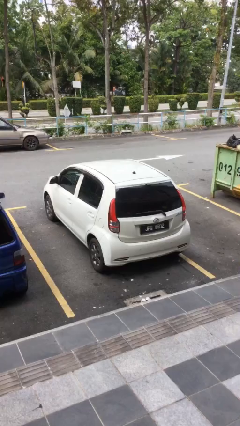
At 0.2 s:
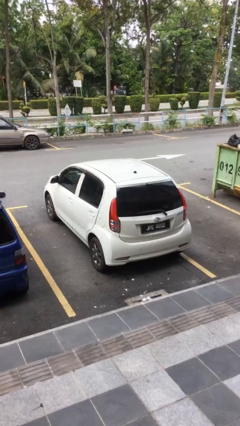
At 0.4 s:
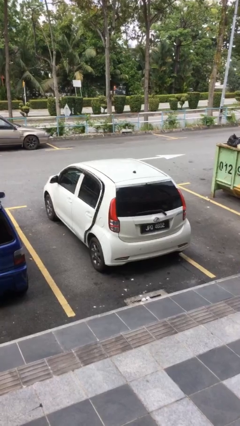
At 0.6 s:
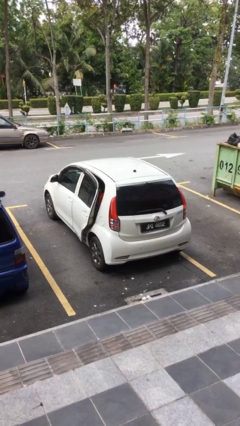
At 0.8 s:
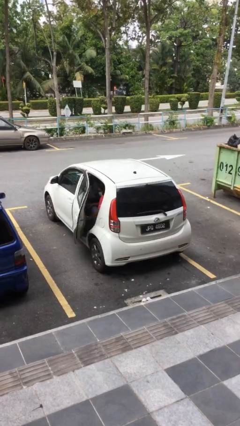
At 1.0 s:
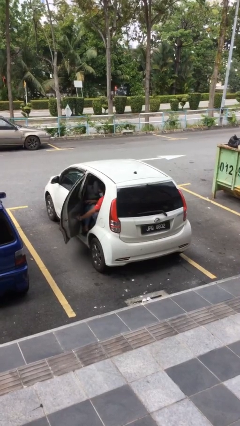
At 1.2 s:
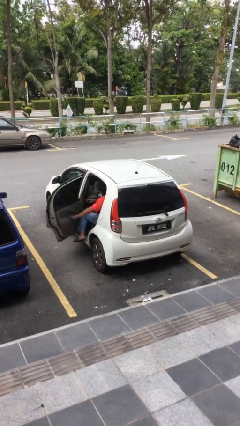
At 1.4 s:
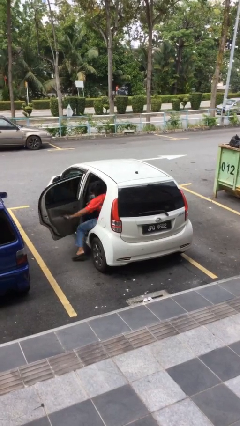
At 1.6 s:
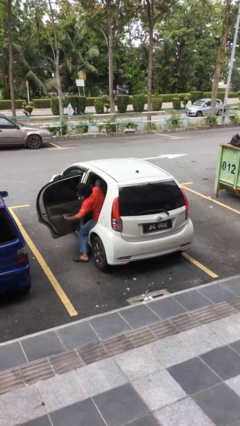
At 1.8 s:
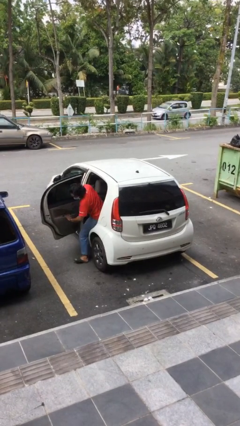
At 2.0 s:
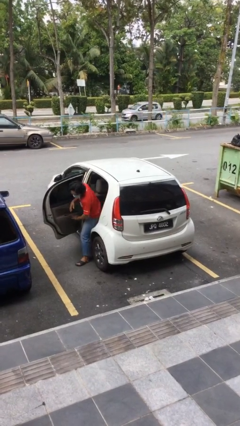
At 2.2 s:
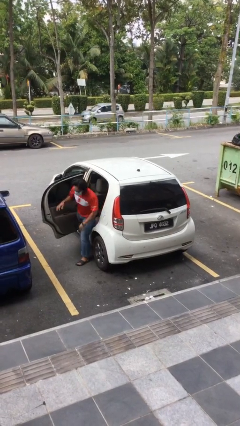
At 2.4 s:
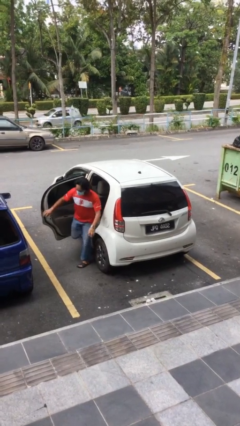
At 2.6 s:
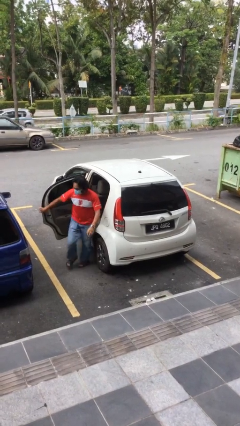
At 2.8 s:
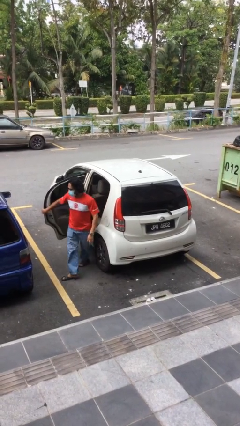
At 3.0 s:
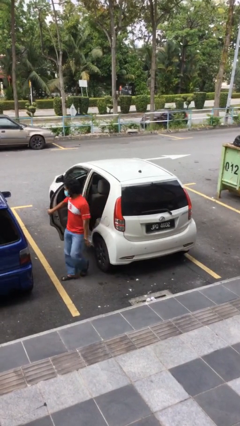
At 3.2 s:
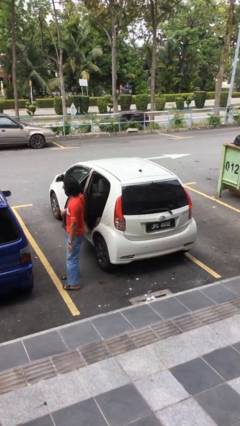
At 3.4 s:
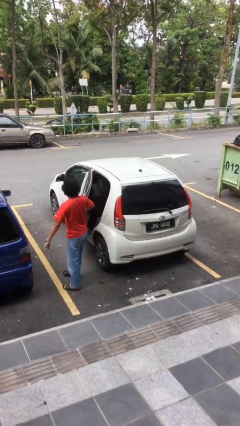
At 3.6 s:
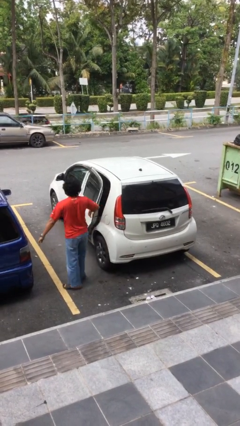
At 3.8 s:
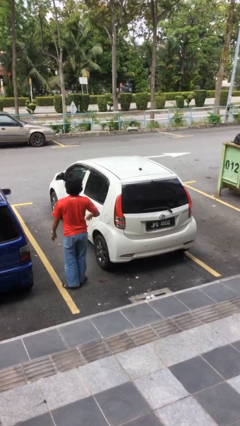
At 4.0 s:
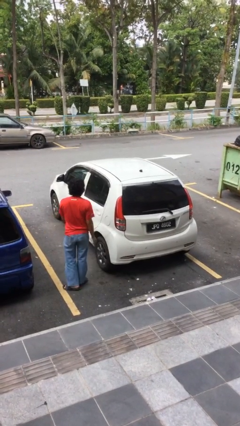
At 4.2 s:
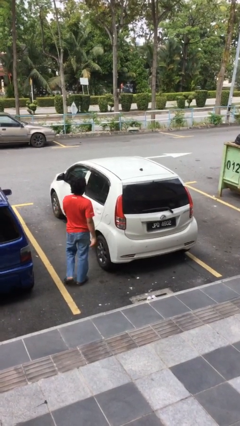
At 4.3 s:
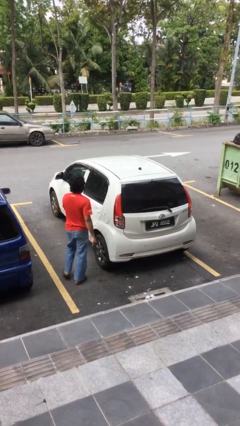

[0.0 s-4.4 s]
car drops off person

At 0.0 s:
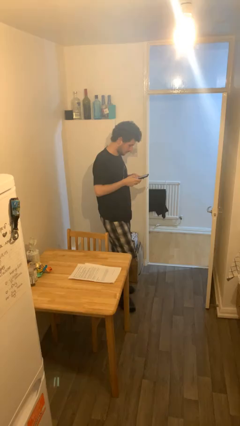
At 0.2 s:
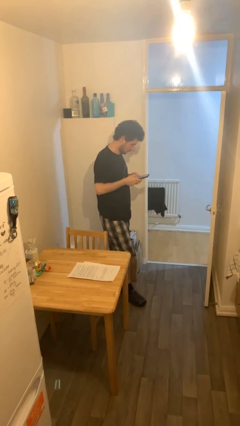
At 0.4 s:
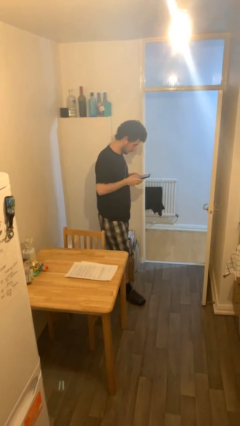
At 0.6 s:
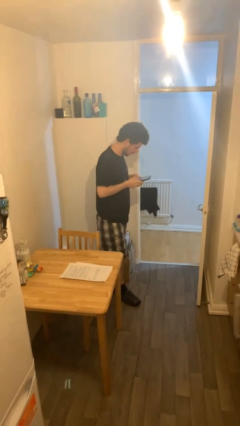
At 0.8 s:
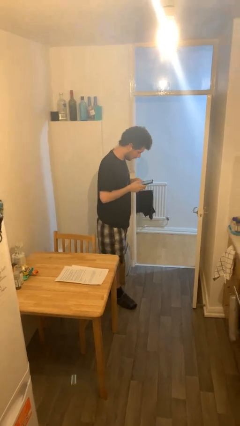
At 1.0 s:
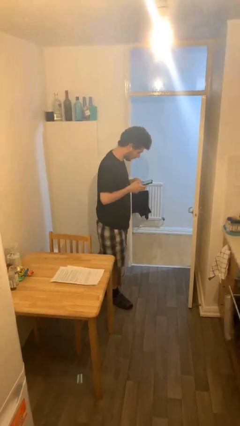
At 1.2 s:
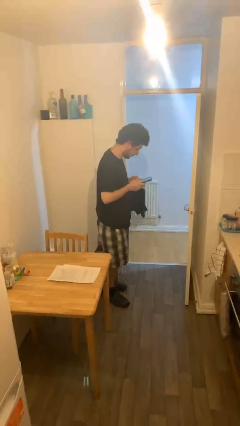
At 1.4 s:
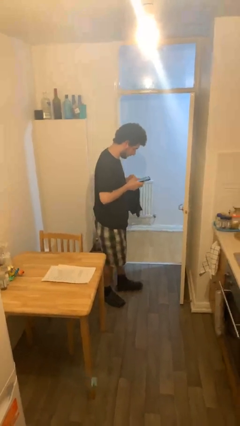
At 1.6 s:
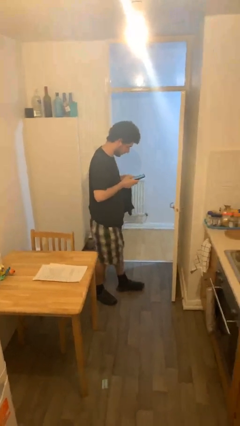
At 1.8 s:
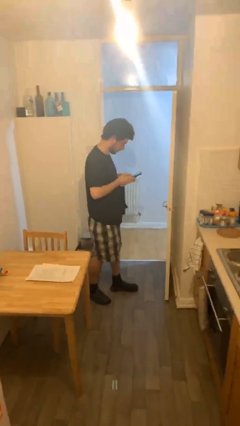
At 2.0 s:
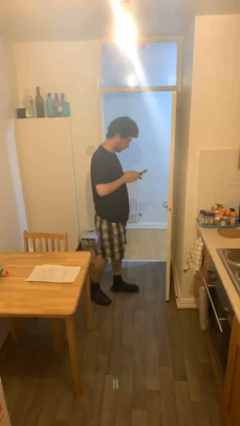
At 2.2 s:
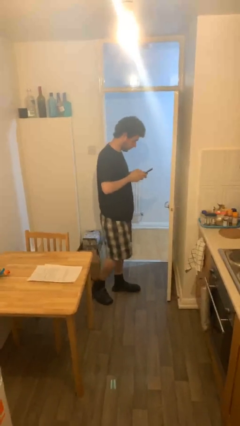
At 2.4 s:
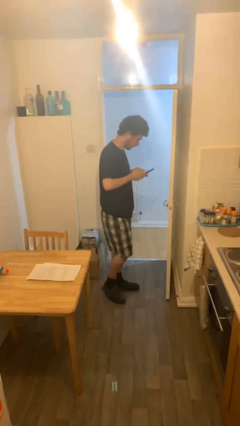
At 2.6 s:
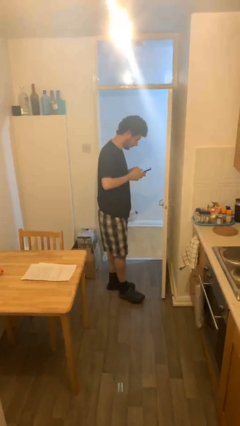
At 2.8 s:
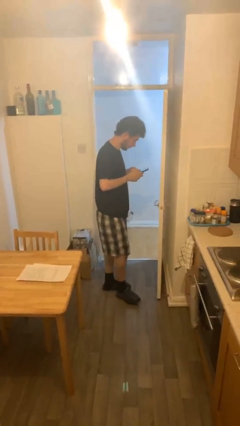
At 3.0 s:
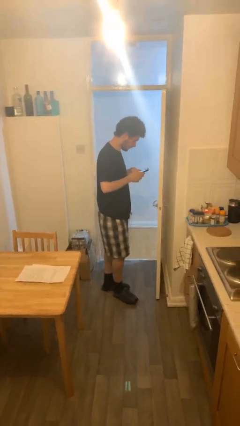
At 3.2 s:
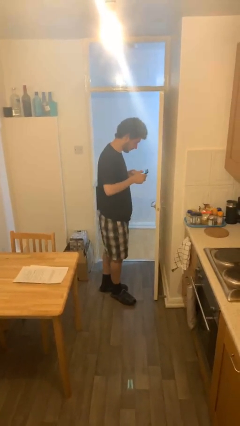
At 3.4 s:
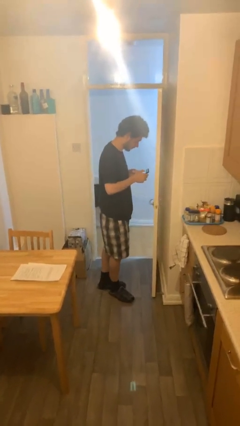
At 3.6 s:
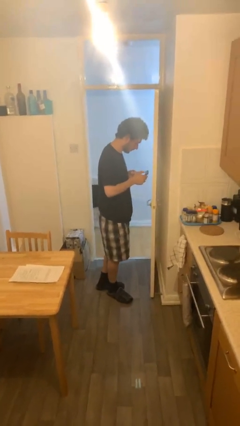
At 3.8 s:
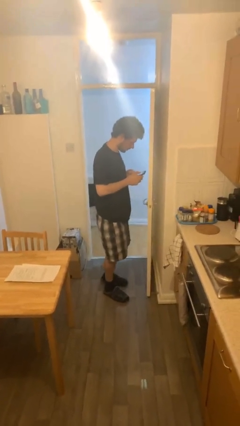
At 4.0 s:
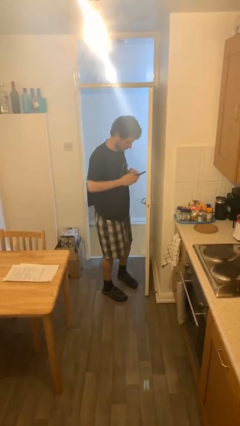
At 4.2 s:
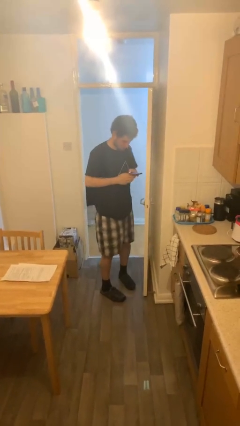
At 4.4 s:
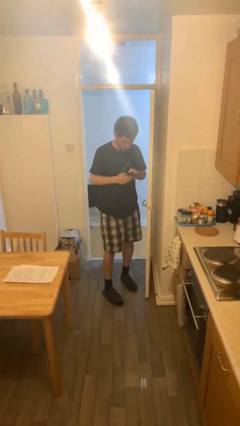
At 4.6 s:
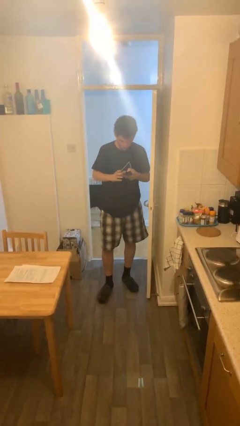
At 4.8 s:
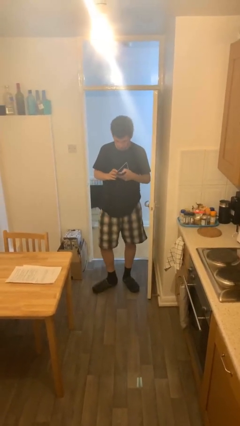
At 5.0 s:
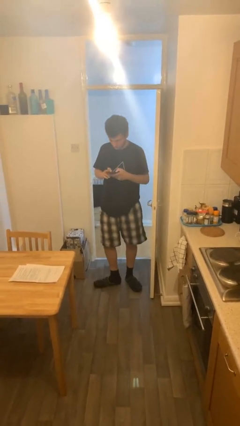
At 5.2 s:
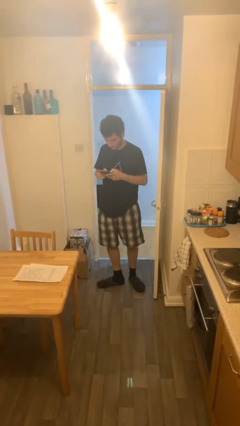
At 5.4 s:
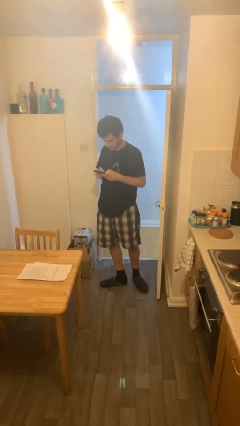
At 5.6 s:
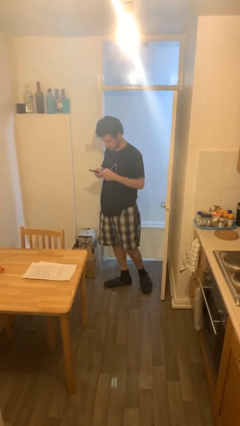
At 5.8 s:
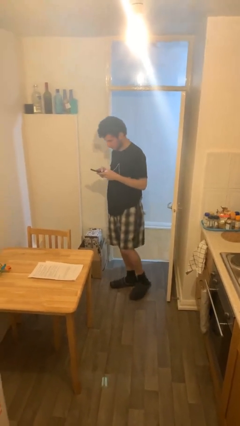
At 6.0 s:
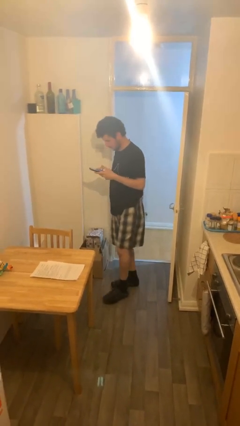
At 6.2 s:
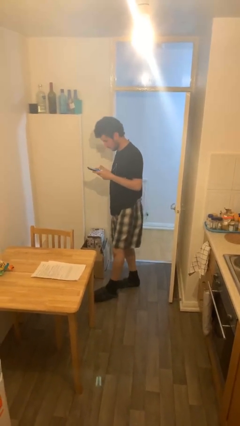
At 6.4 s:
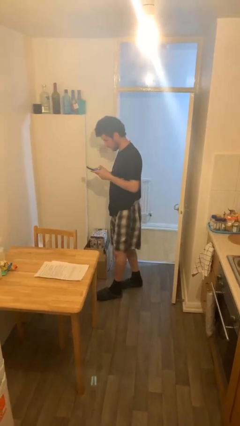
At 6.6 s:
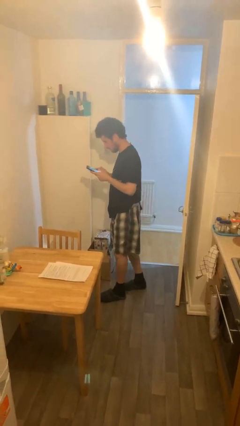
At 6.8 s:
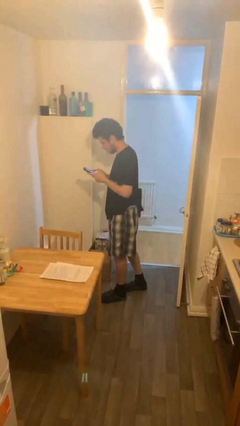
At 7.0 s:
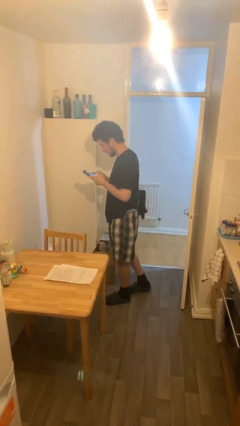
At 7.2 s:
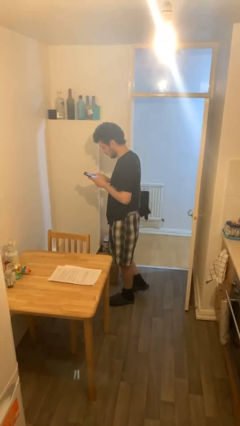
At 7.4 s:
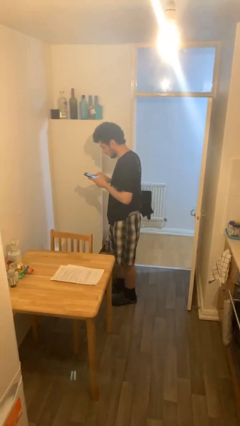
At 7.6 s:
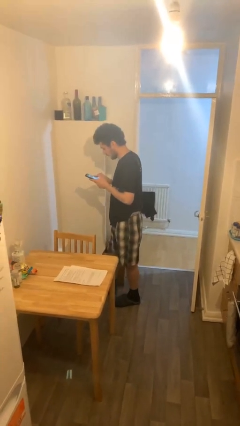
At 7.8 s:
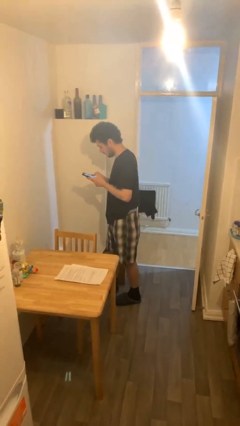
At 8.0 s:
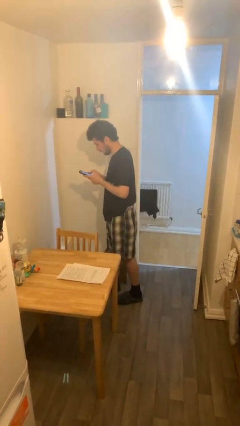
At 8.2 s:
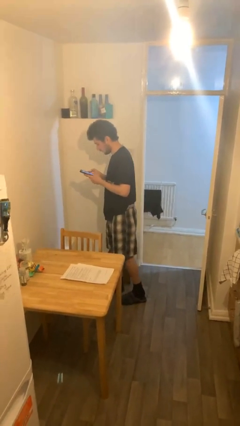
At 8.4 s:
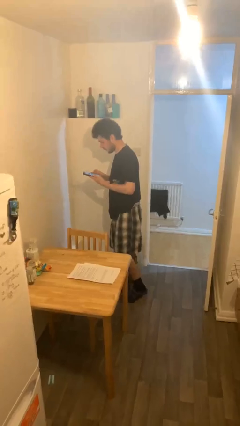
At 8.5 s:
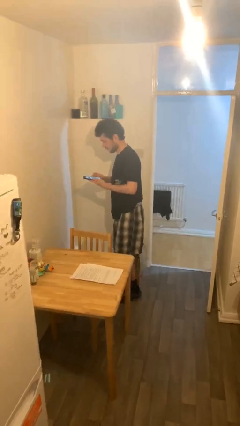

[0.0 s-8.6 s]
person texts on phone

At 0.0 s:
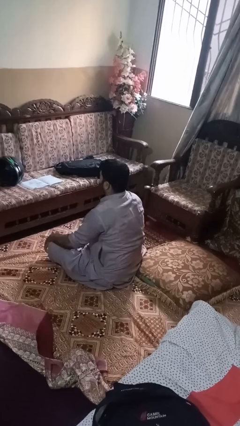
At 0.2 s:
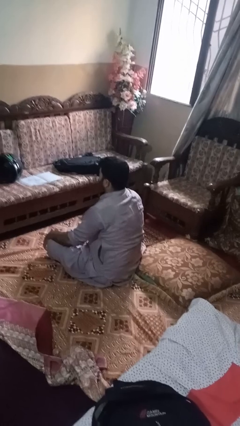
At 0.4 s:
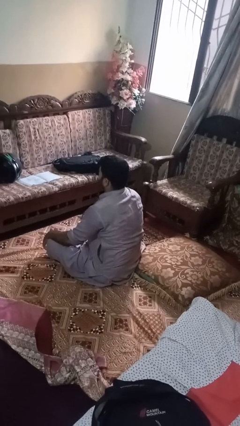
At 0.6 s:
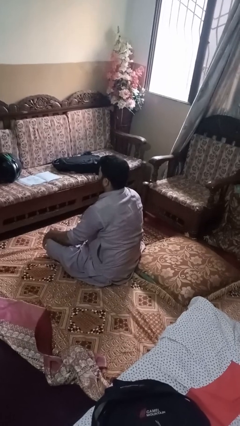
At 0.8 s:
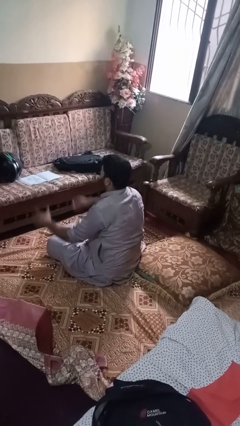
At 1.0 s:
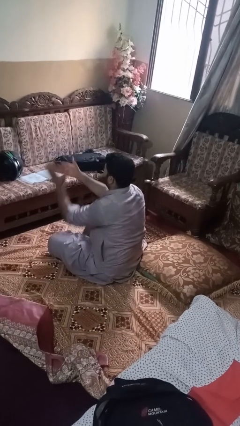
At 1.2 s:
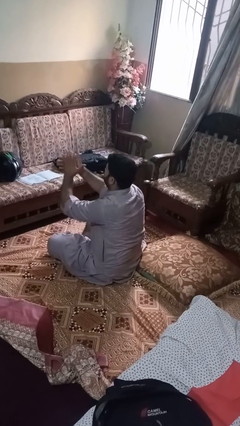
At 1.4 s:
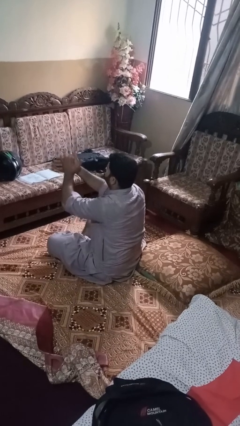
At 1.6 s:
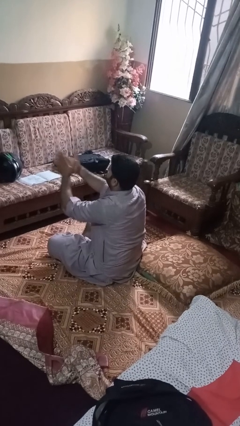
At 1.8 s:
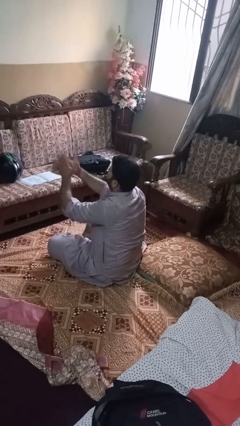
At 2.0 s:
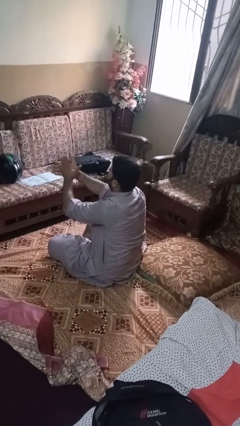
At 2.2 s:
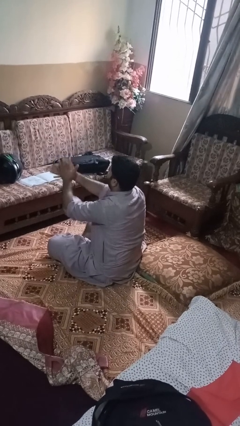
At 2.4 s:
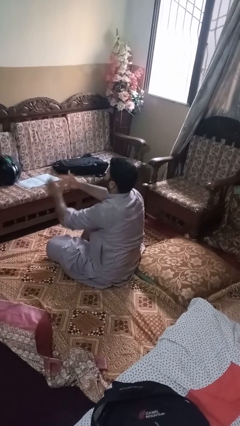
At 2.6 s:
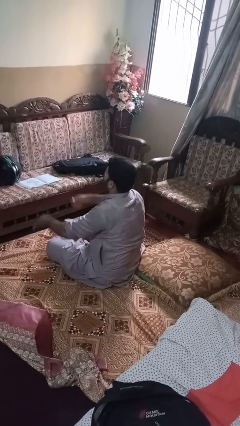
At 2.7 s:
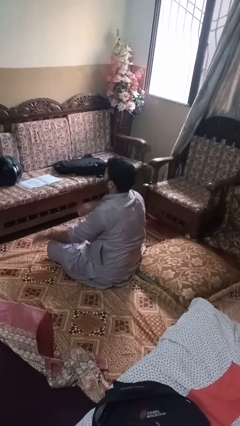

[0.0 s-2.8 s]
person claps hands

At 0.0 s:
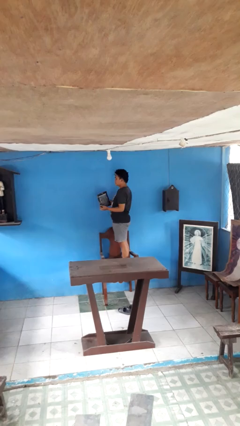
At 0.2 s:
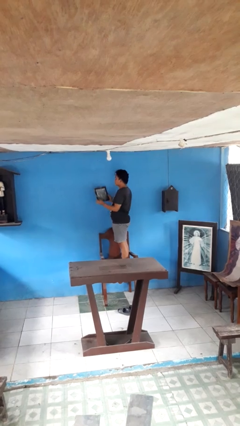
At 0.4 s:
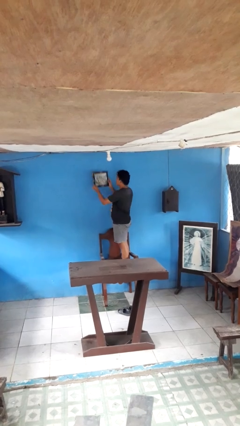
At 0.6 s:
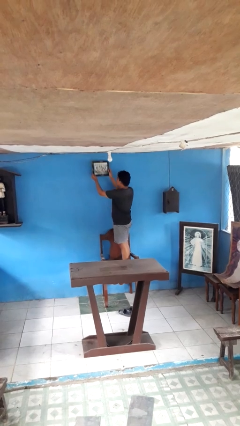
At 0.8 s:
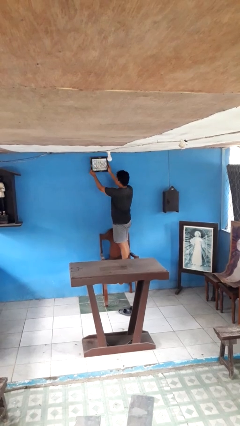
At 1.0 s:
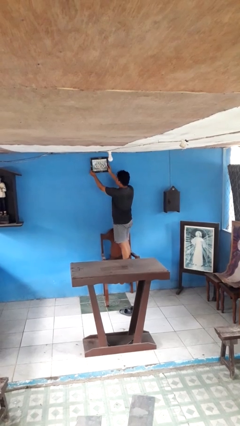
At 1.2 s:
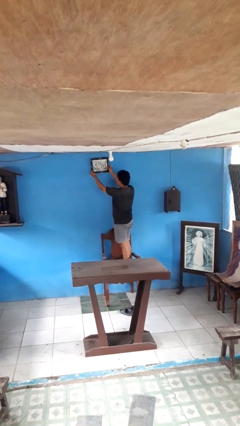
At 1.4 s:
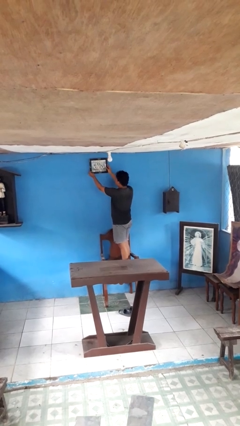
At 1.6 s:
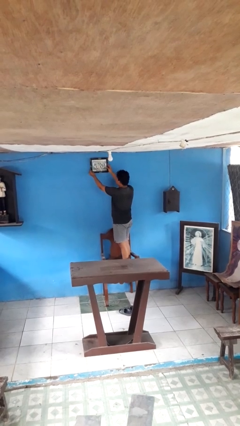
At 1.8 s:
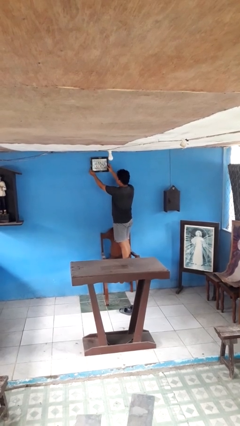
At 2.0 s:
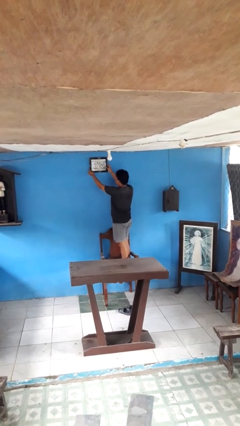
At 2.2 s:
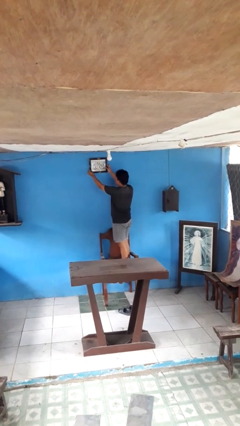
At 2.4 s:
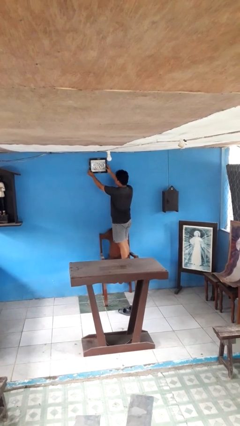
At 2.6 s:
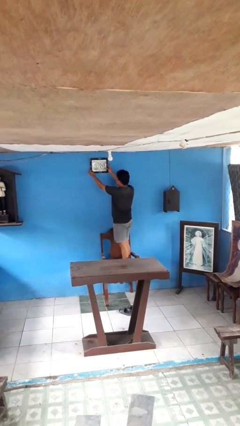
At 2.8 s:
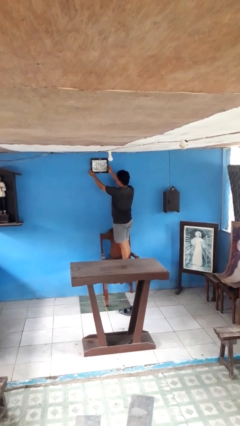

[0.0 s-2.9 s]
person puts up picture frame
